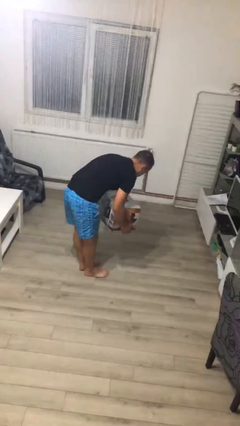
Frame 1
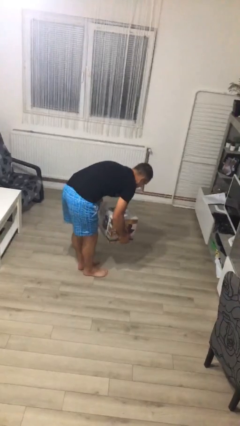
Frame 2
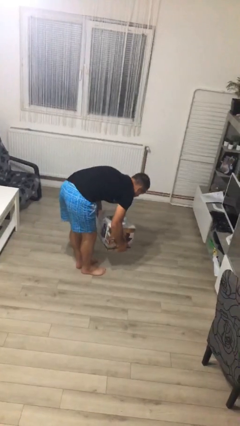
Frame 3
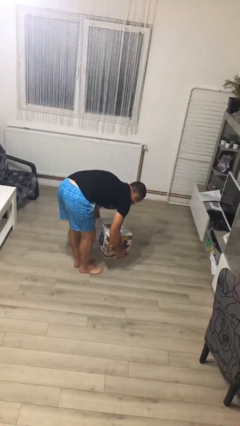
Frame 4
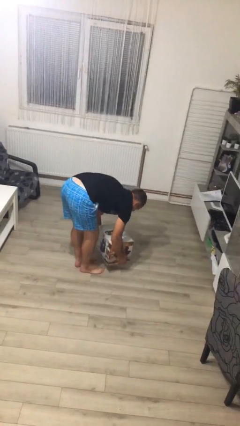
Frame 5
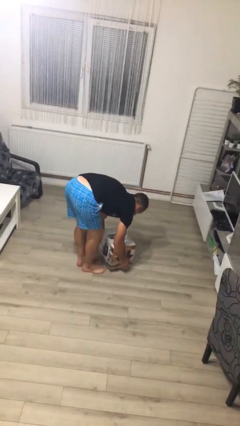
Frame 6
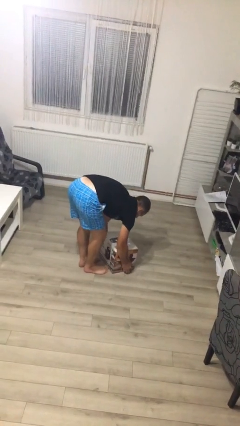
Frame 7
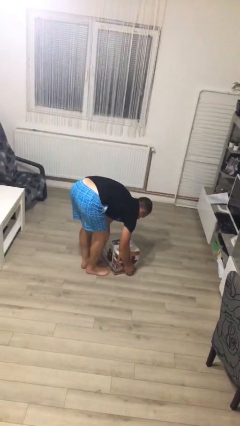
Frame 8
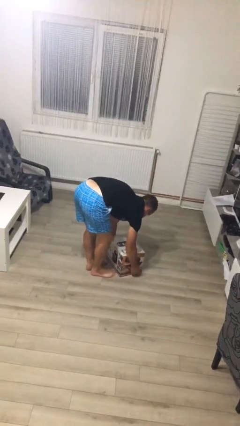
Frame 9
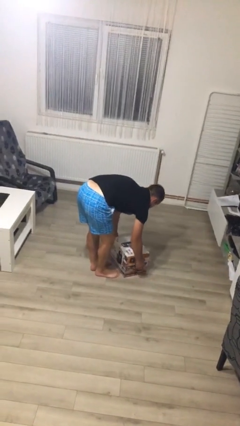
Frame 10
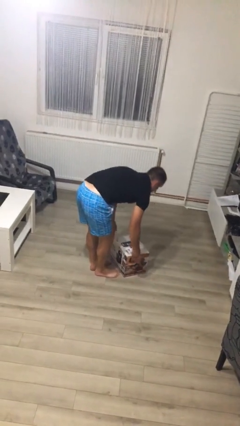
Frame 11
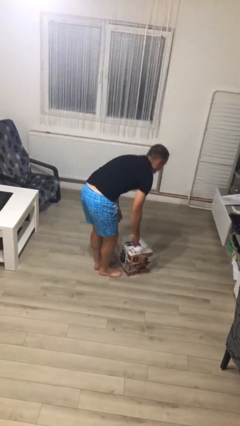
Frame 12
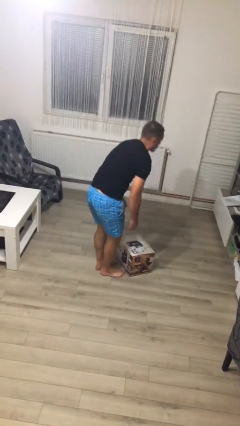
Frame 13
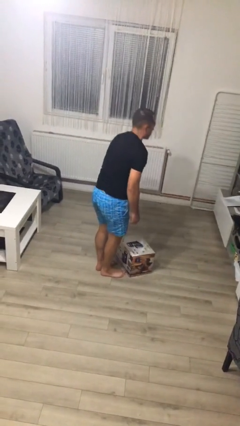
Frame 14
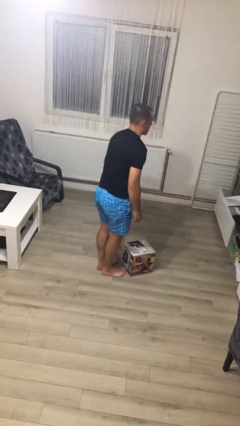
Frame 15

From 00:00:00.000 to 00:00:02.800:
person puts down object on floor

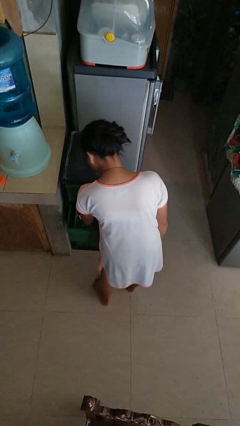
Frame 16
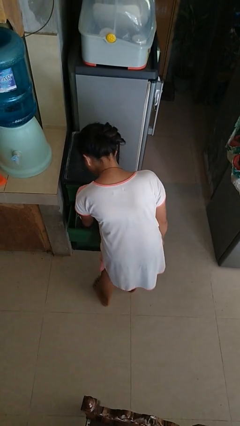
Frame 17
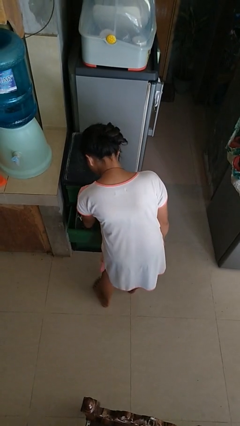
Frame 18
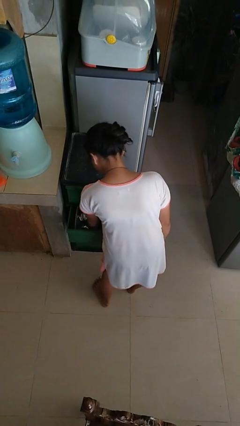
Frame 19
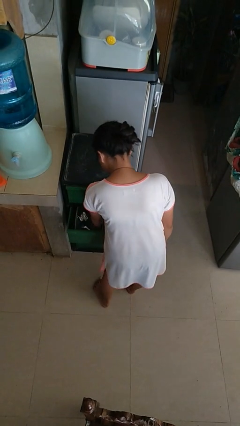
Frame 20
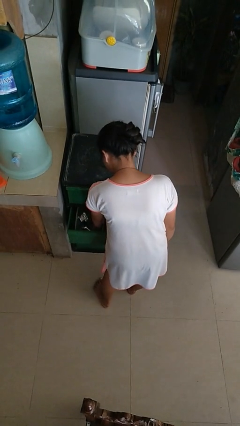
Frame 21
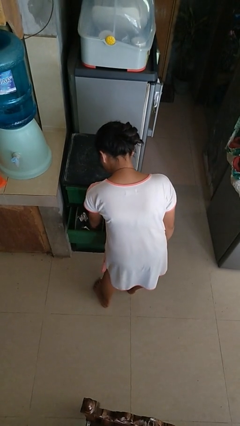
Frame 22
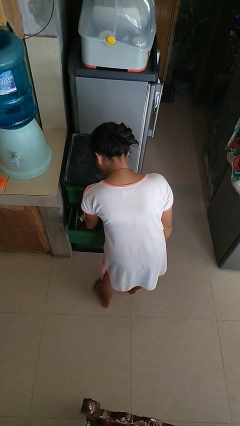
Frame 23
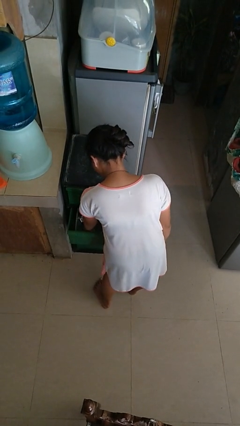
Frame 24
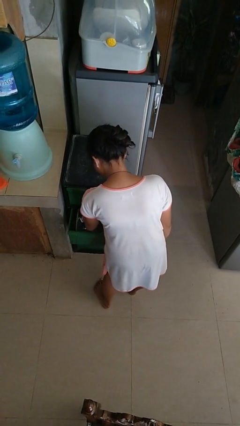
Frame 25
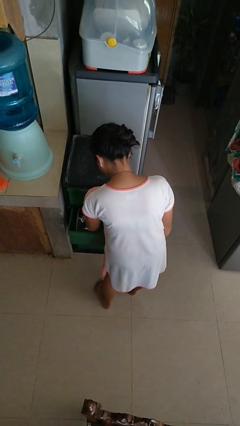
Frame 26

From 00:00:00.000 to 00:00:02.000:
person searches in kitchen drawer

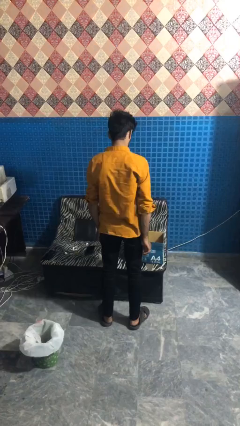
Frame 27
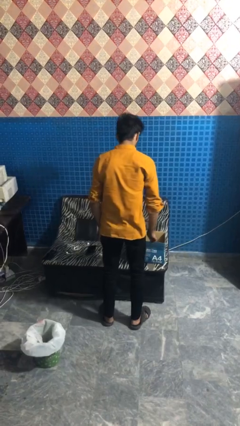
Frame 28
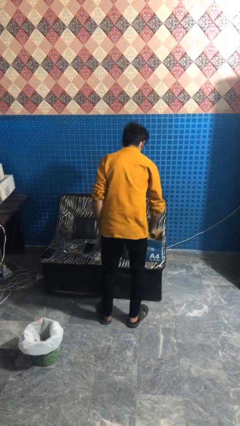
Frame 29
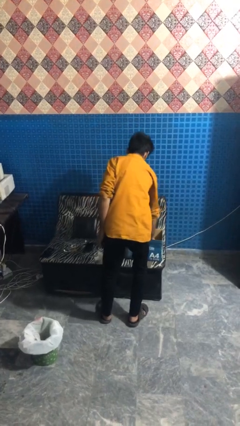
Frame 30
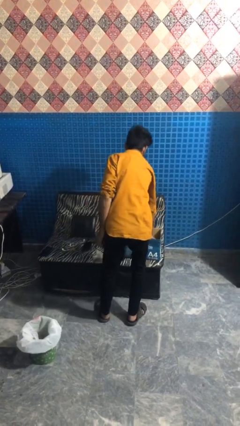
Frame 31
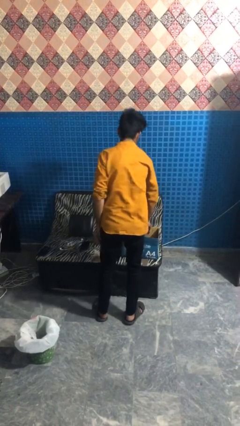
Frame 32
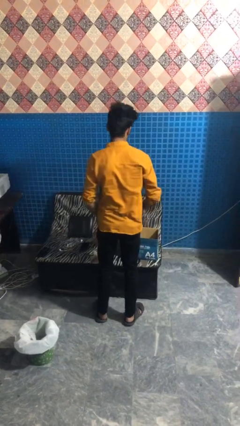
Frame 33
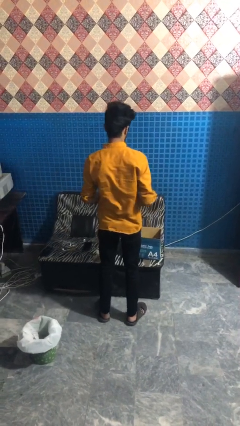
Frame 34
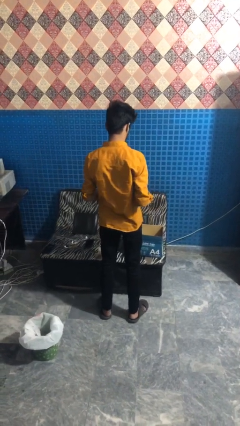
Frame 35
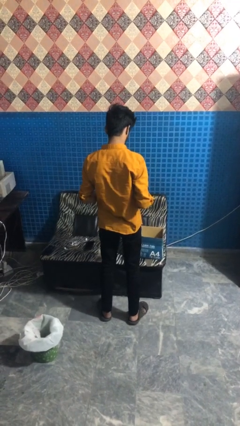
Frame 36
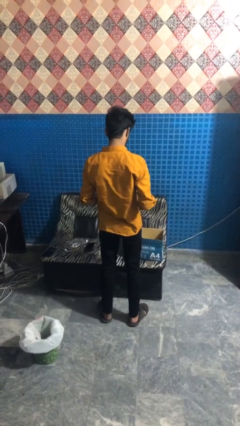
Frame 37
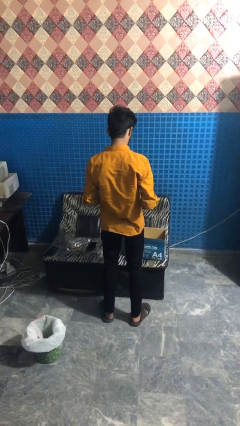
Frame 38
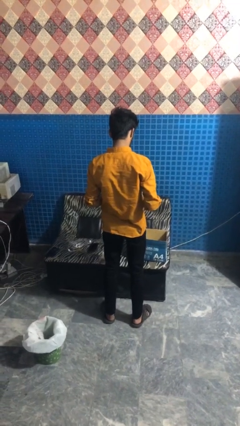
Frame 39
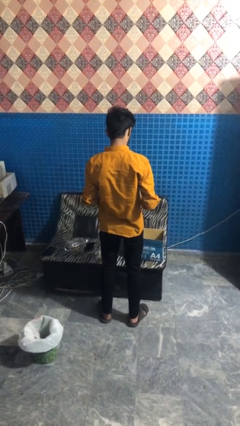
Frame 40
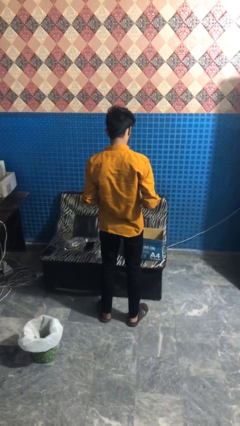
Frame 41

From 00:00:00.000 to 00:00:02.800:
person takes object from box

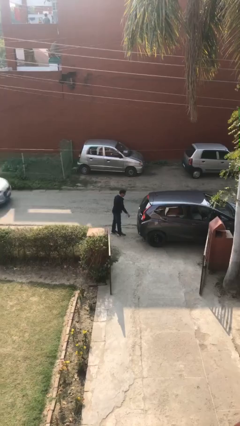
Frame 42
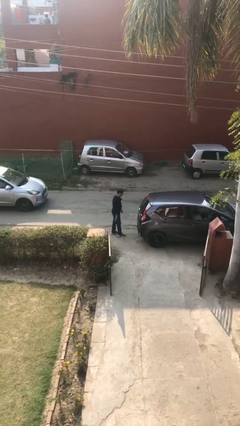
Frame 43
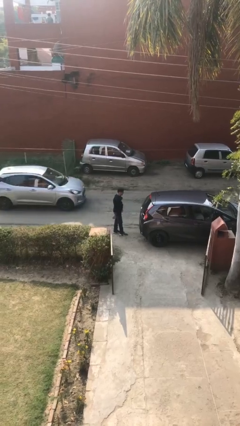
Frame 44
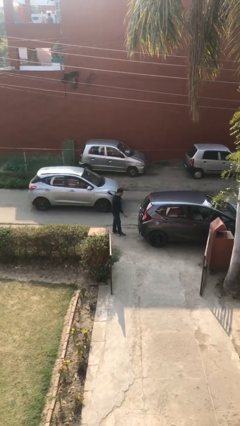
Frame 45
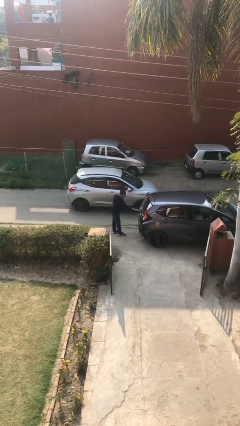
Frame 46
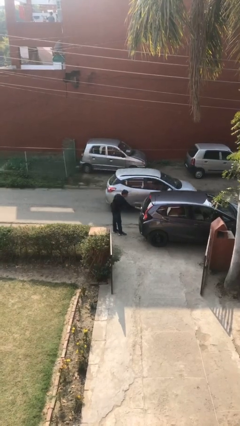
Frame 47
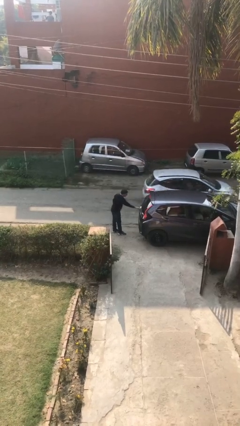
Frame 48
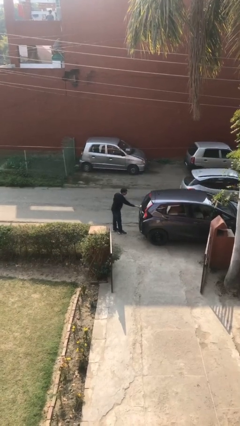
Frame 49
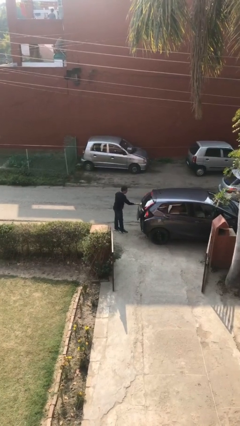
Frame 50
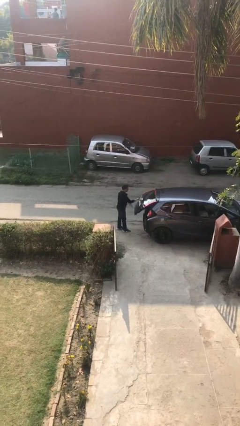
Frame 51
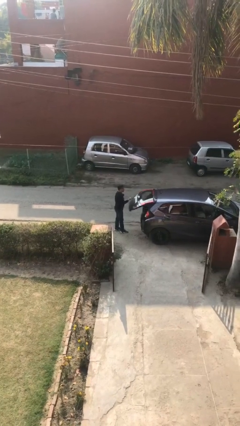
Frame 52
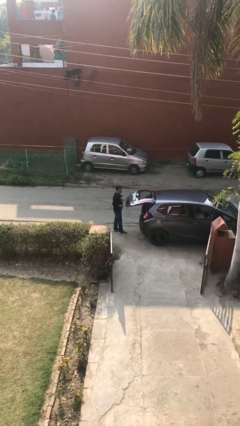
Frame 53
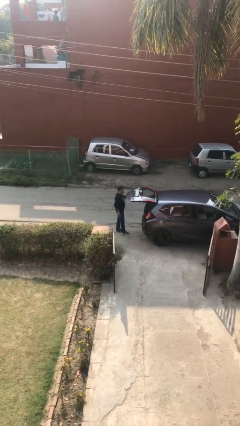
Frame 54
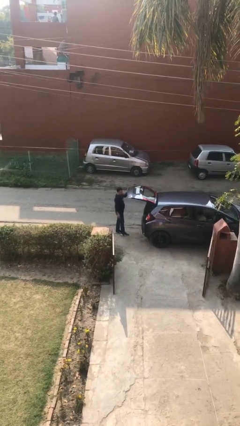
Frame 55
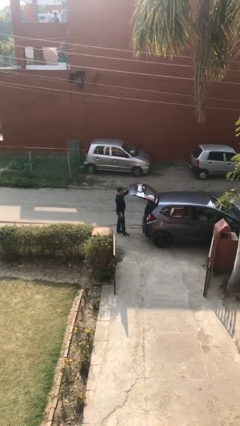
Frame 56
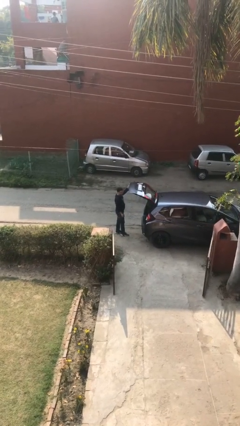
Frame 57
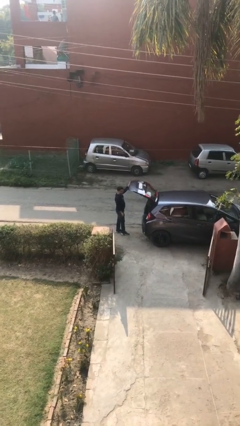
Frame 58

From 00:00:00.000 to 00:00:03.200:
person opens car trunk

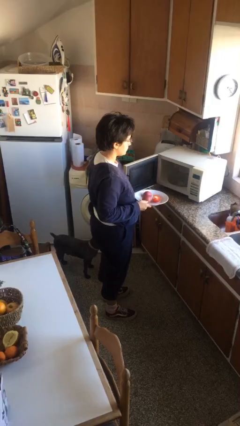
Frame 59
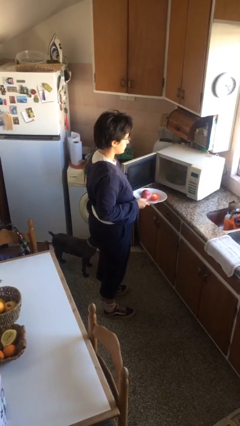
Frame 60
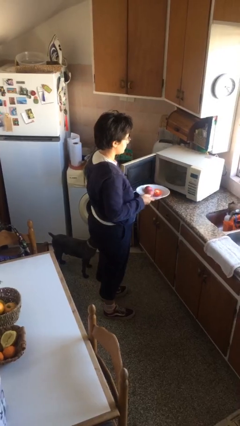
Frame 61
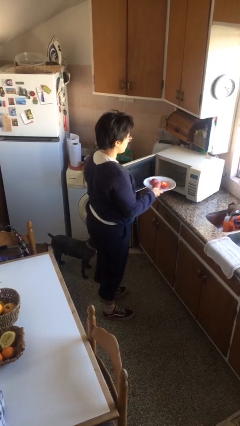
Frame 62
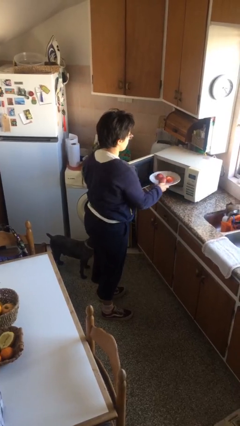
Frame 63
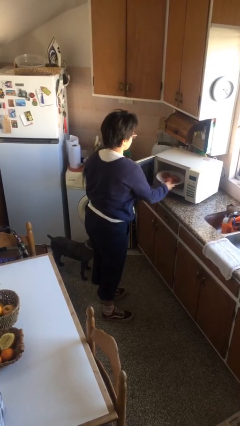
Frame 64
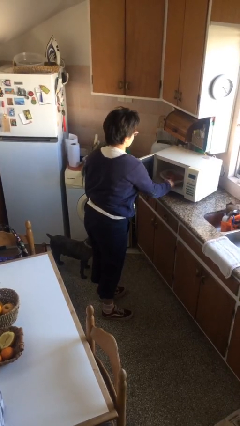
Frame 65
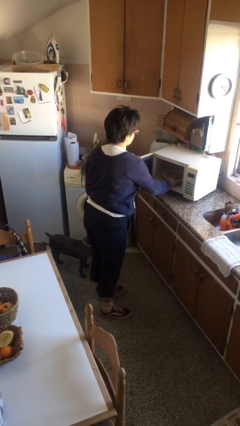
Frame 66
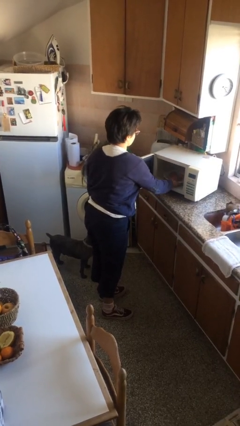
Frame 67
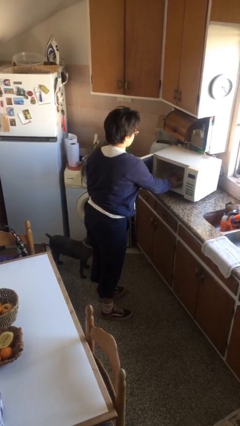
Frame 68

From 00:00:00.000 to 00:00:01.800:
person puts object into microwave

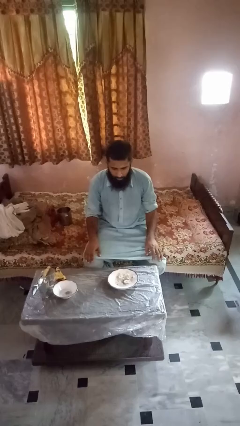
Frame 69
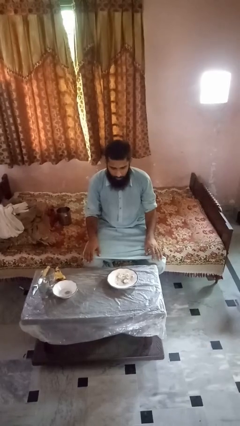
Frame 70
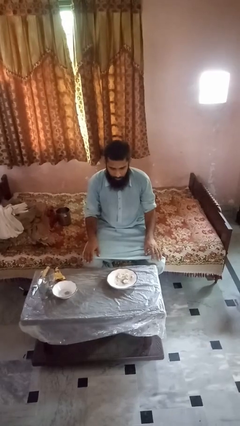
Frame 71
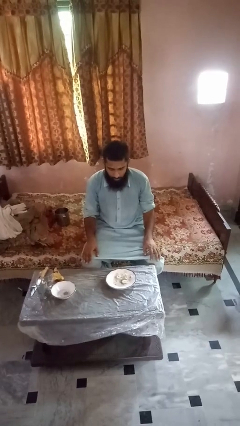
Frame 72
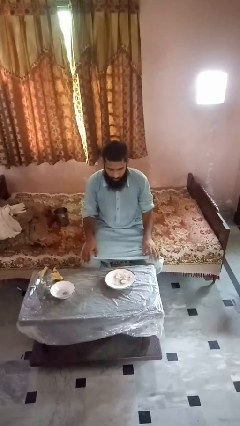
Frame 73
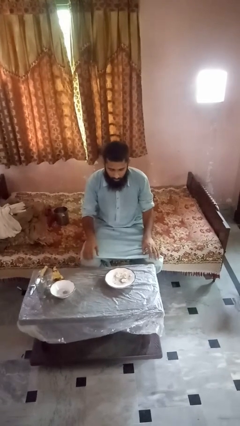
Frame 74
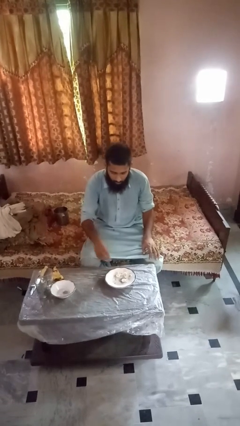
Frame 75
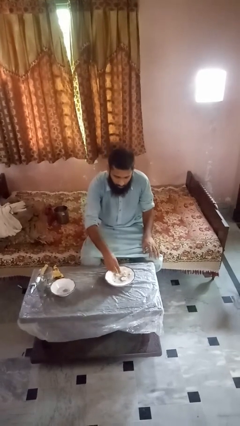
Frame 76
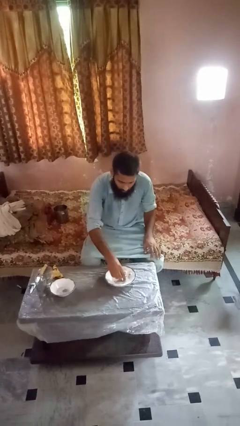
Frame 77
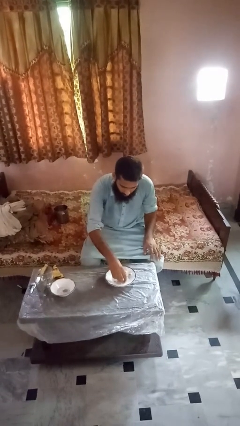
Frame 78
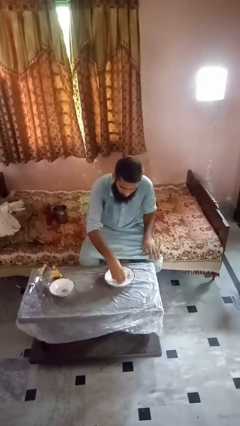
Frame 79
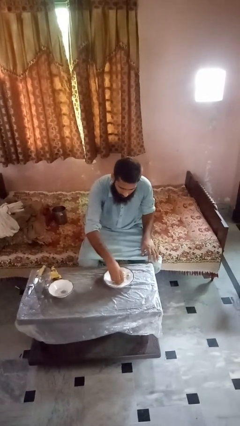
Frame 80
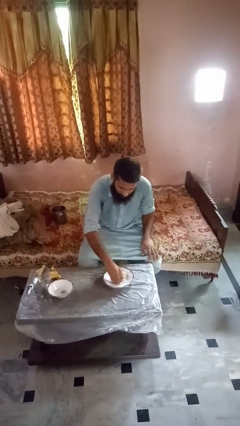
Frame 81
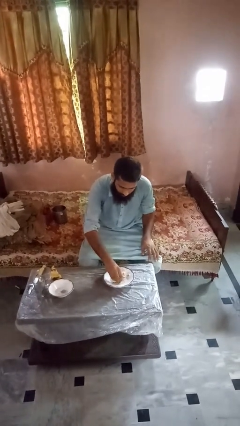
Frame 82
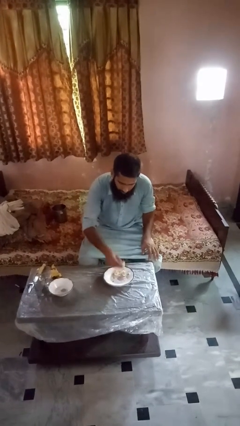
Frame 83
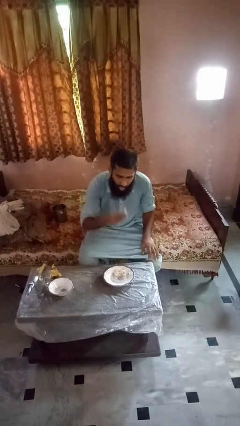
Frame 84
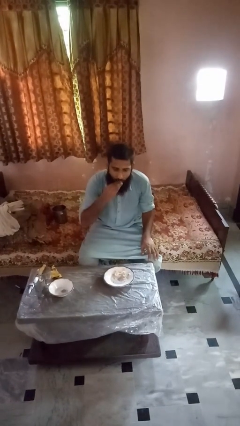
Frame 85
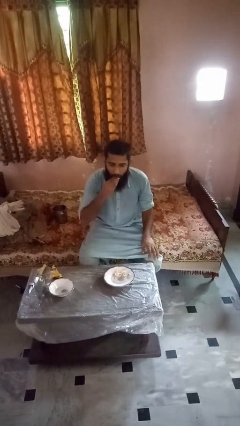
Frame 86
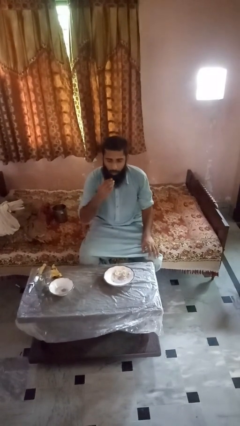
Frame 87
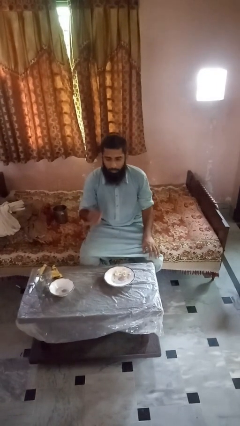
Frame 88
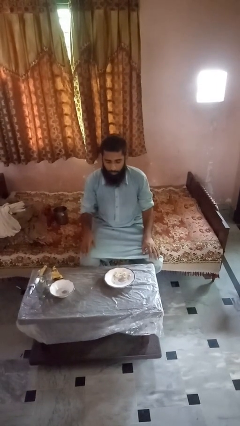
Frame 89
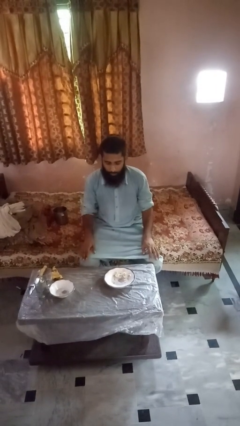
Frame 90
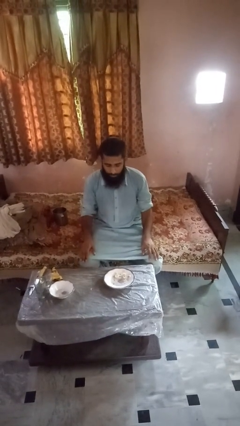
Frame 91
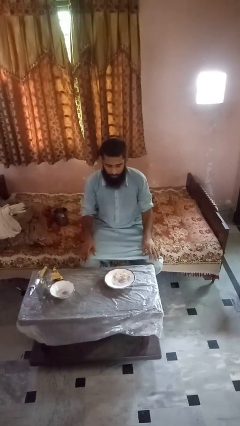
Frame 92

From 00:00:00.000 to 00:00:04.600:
person eats with hands

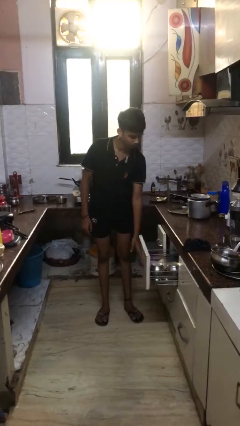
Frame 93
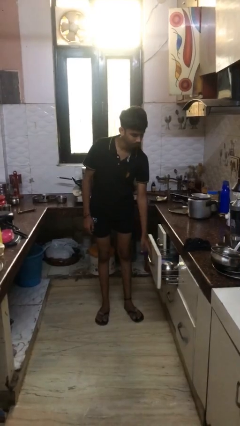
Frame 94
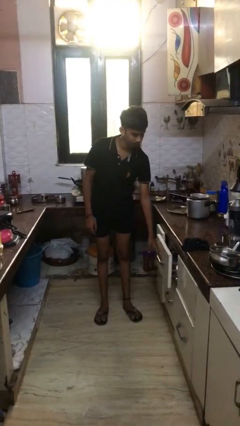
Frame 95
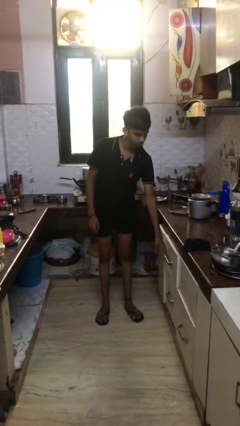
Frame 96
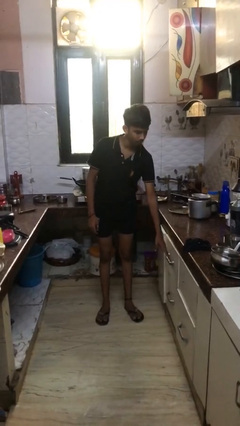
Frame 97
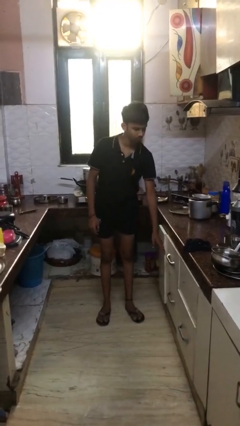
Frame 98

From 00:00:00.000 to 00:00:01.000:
person closes kitchen drawer
